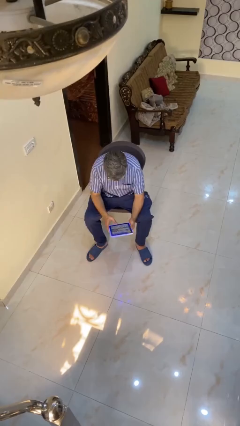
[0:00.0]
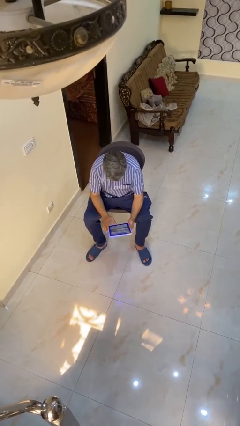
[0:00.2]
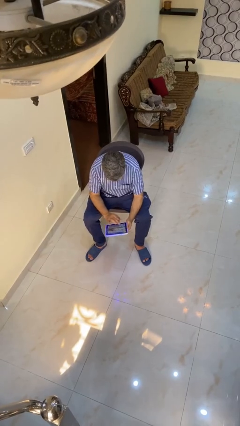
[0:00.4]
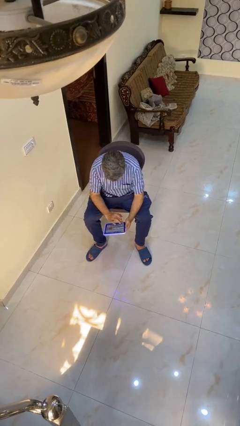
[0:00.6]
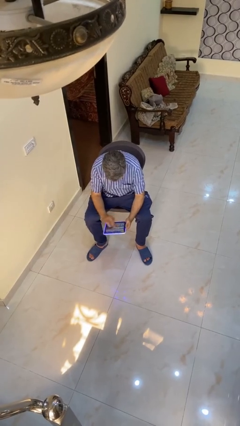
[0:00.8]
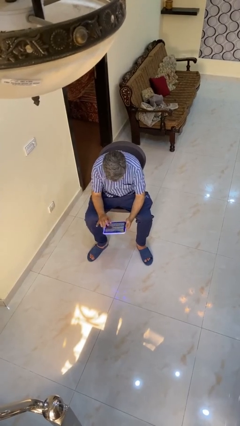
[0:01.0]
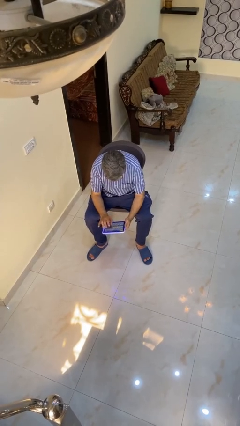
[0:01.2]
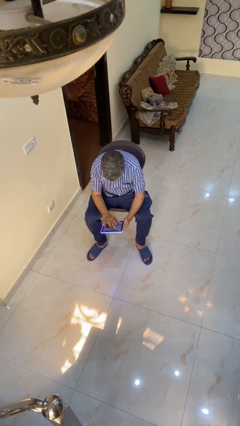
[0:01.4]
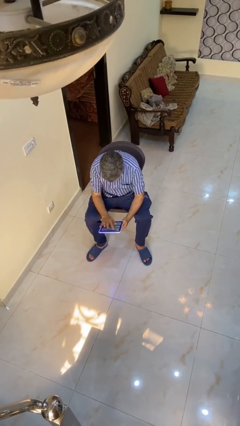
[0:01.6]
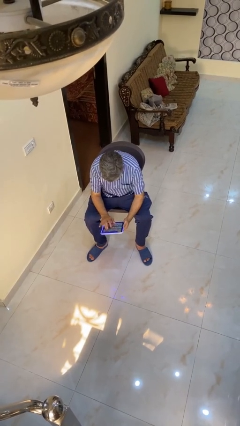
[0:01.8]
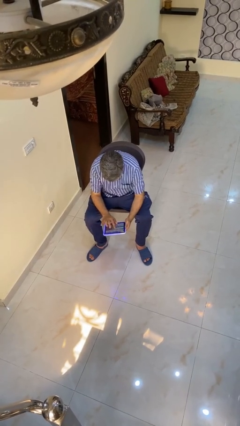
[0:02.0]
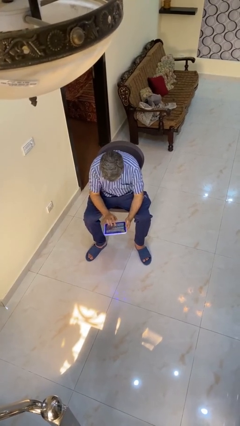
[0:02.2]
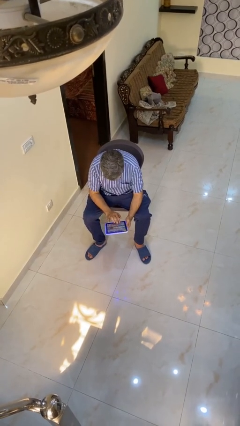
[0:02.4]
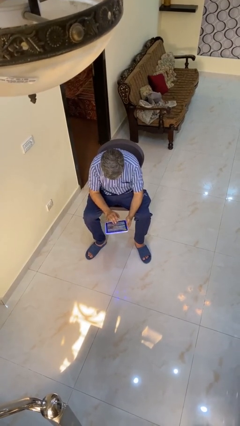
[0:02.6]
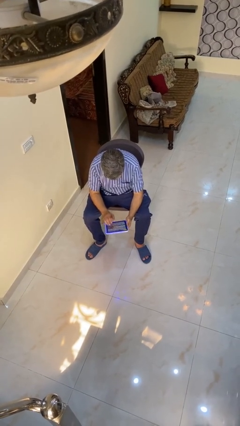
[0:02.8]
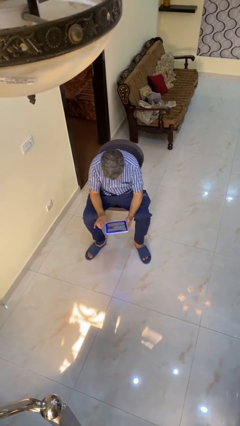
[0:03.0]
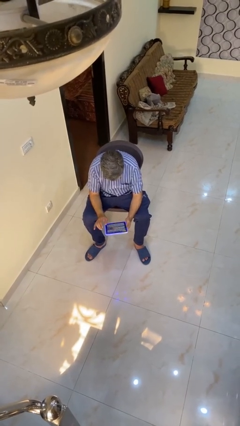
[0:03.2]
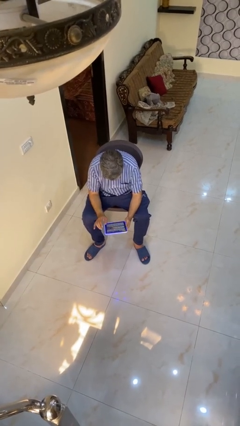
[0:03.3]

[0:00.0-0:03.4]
person interacts with tablet

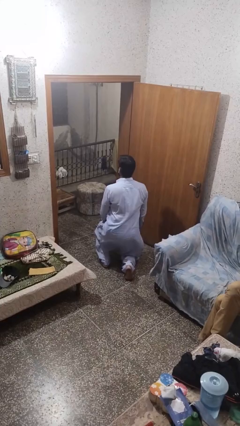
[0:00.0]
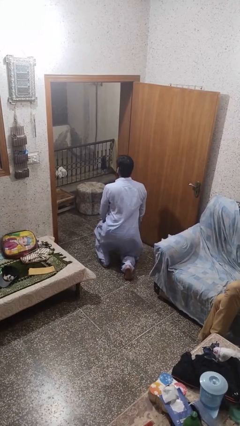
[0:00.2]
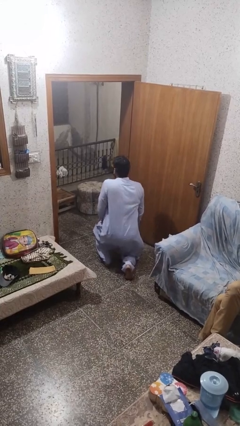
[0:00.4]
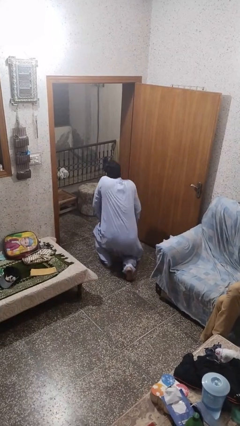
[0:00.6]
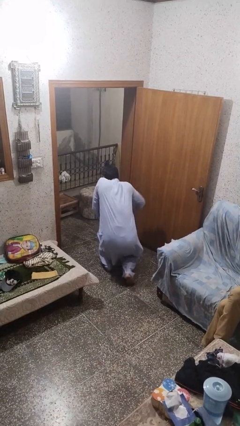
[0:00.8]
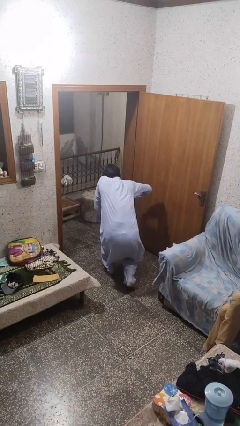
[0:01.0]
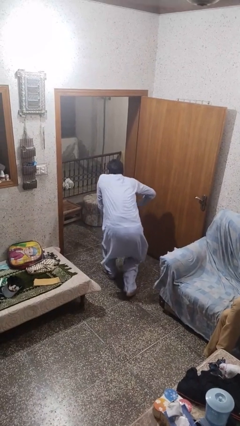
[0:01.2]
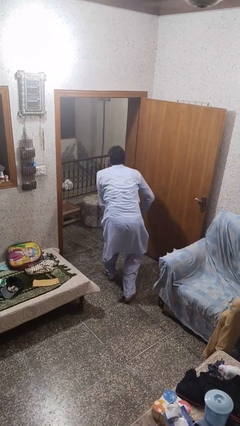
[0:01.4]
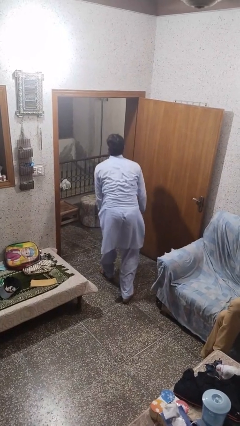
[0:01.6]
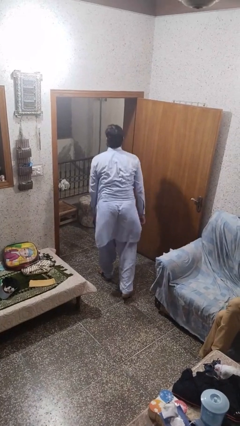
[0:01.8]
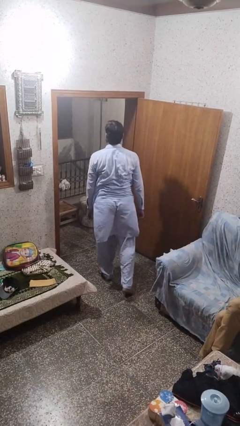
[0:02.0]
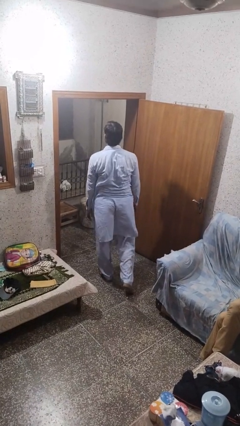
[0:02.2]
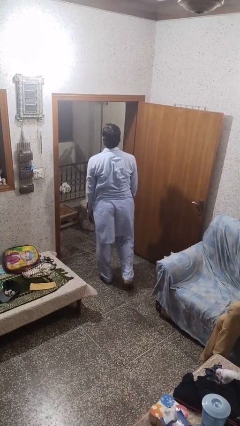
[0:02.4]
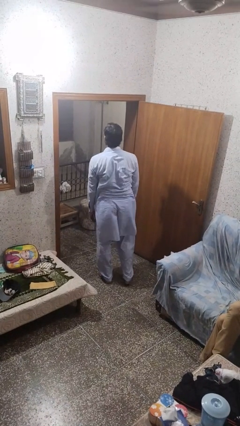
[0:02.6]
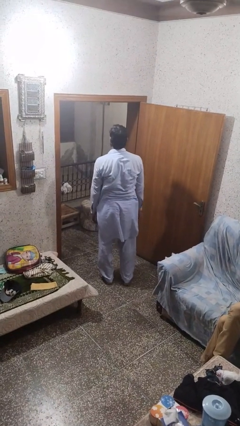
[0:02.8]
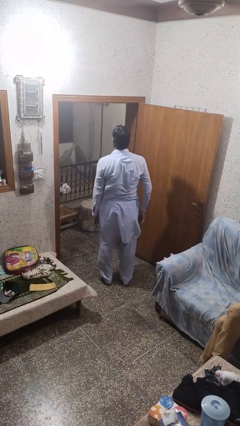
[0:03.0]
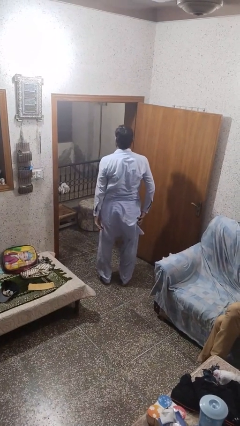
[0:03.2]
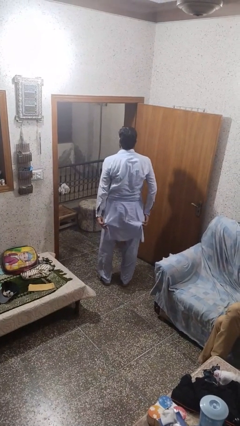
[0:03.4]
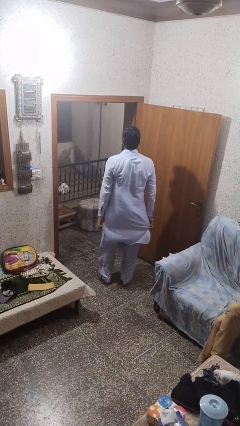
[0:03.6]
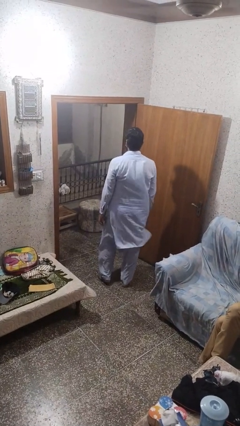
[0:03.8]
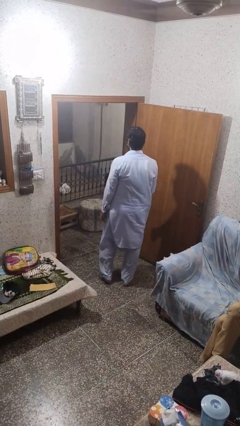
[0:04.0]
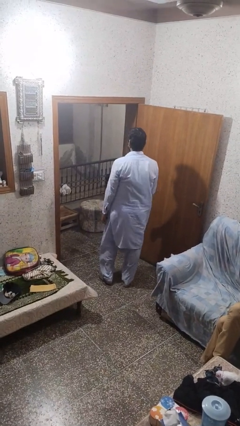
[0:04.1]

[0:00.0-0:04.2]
person stands up from floor

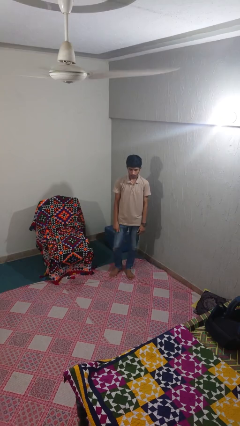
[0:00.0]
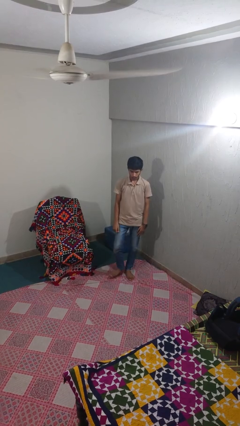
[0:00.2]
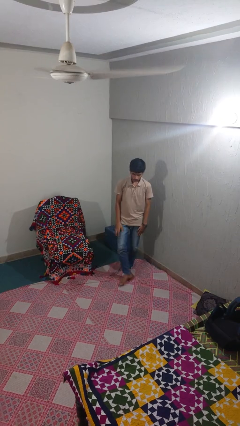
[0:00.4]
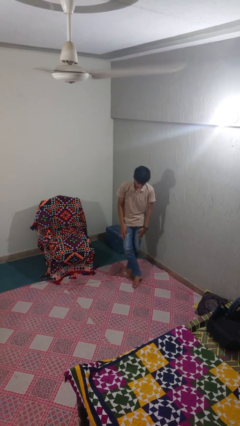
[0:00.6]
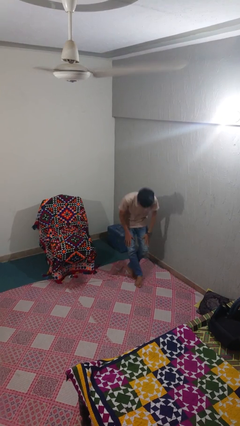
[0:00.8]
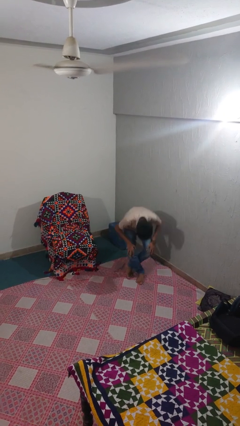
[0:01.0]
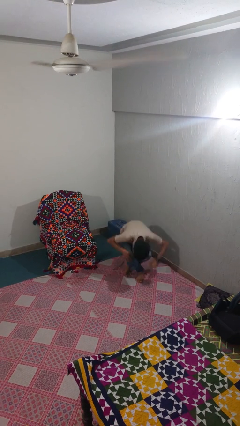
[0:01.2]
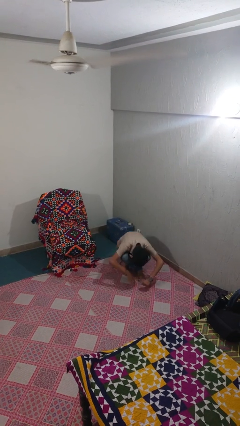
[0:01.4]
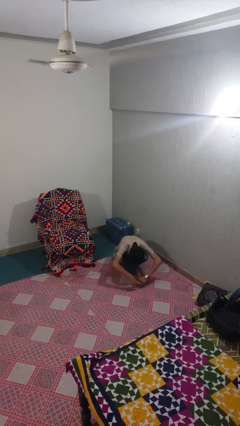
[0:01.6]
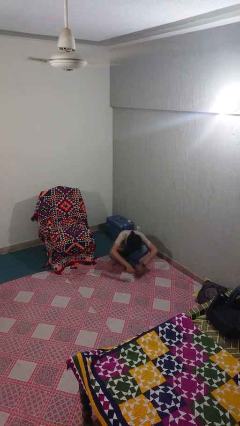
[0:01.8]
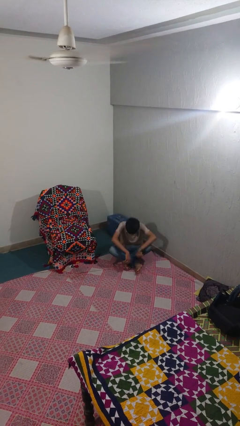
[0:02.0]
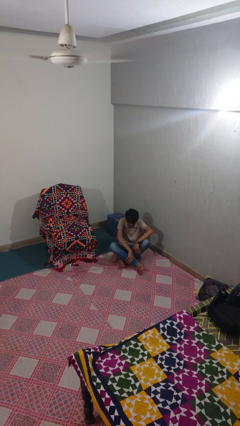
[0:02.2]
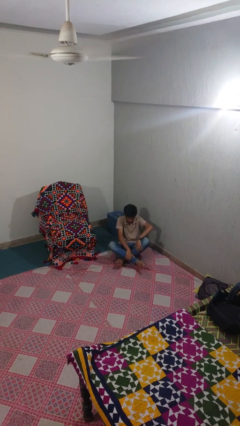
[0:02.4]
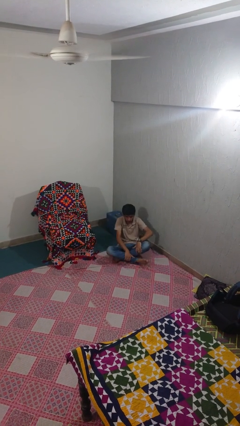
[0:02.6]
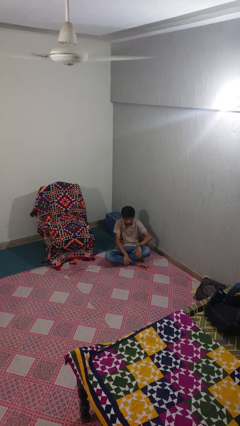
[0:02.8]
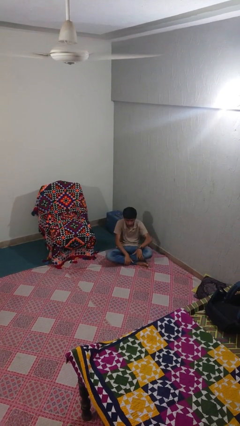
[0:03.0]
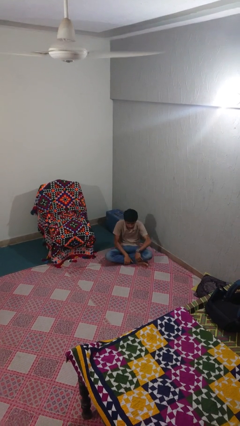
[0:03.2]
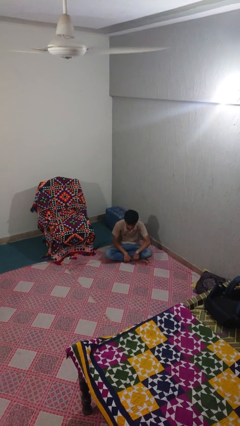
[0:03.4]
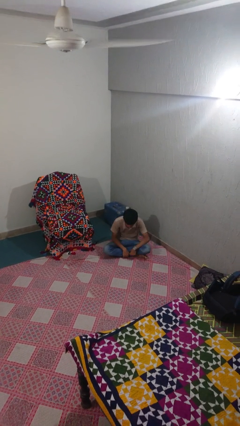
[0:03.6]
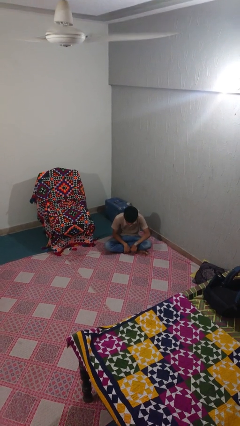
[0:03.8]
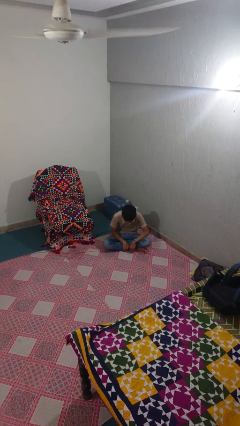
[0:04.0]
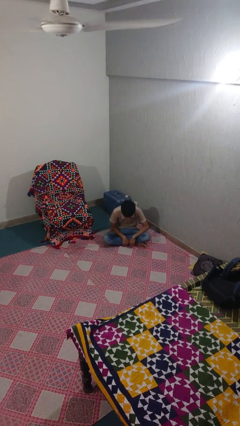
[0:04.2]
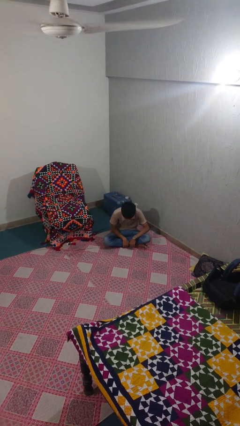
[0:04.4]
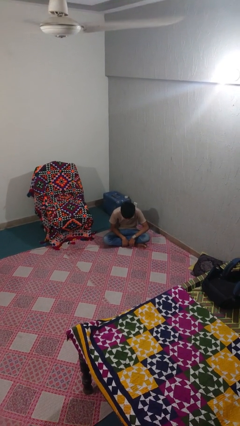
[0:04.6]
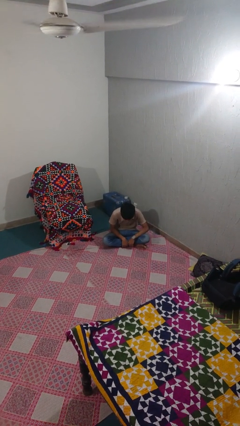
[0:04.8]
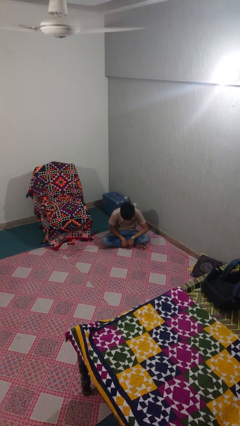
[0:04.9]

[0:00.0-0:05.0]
person sits crisscross

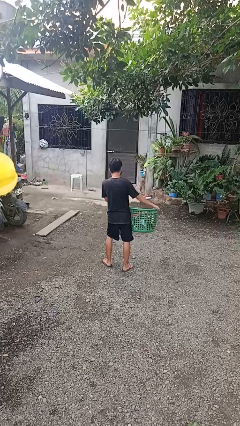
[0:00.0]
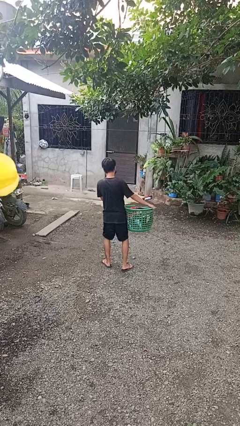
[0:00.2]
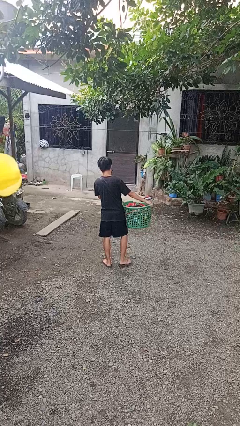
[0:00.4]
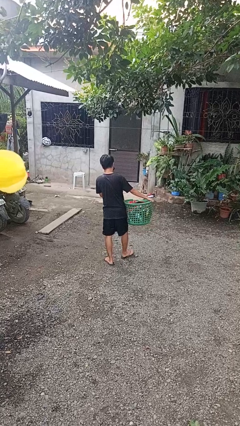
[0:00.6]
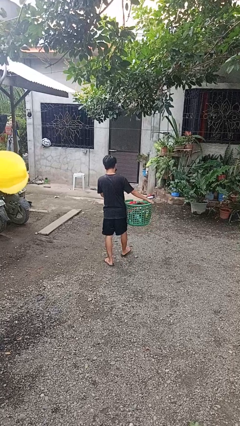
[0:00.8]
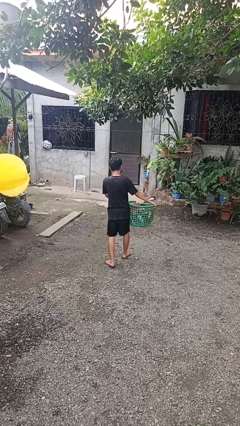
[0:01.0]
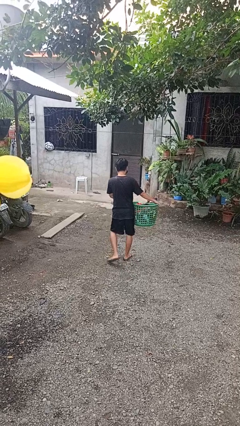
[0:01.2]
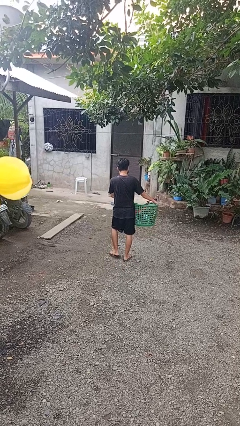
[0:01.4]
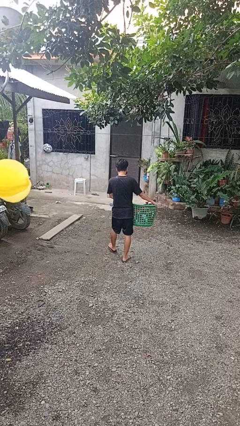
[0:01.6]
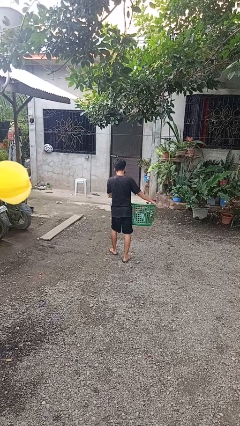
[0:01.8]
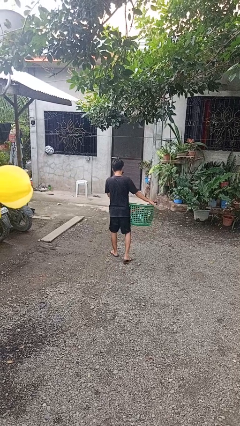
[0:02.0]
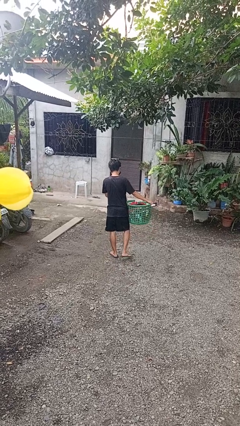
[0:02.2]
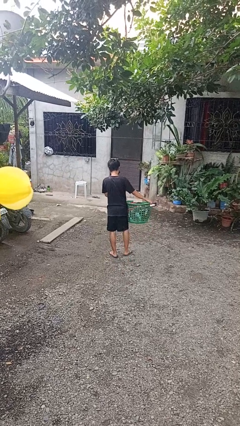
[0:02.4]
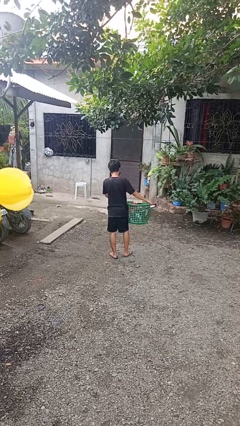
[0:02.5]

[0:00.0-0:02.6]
person carries laundry basket

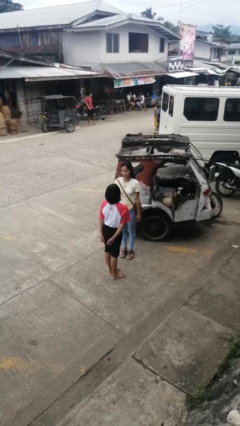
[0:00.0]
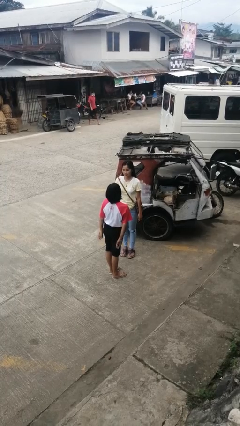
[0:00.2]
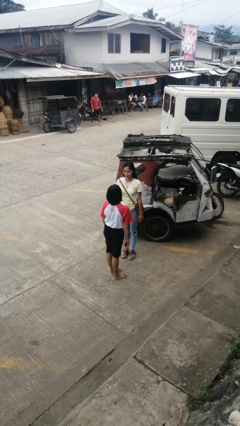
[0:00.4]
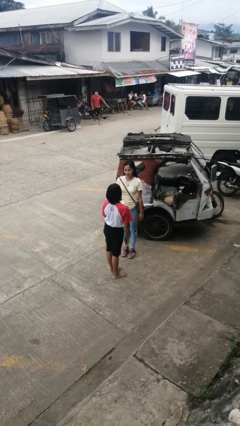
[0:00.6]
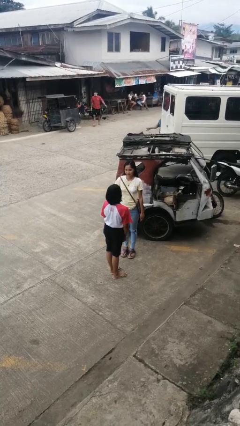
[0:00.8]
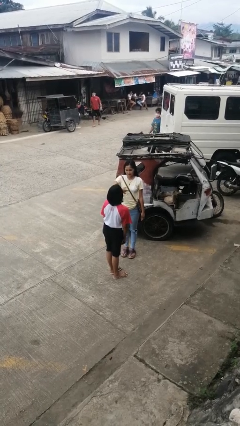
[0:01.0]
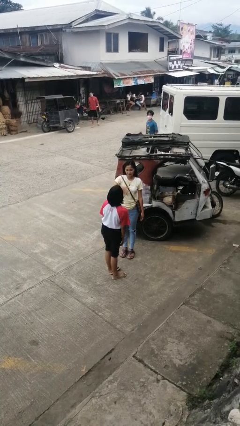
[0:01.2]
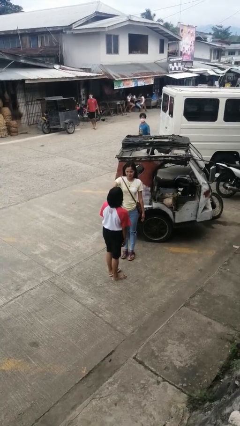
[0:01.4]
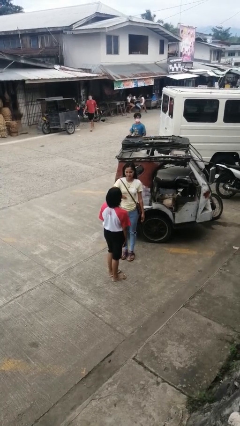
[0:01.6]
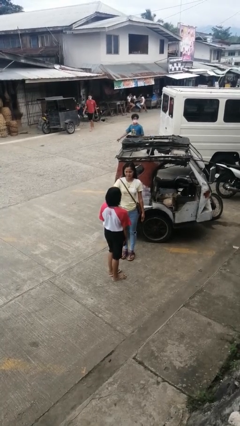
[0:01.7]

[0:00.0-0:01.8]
person shoves person

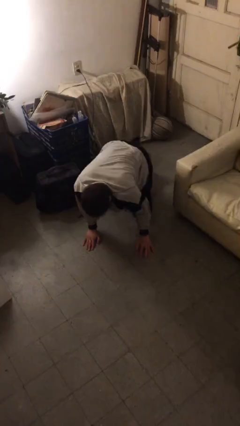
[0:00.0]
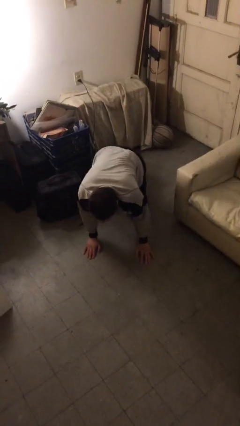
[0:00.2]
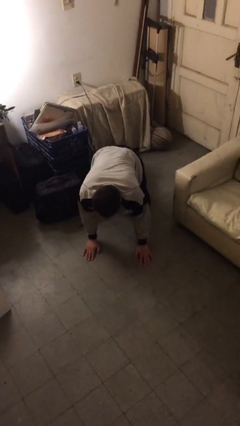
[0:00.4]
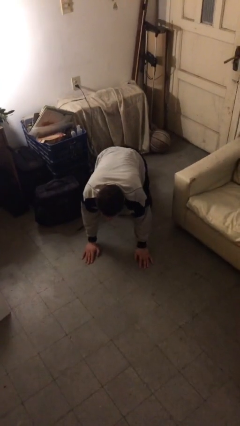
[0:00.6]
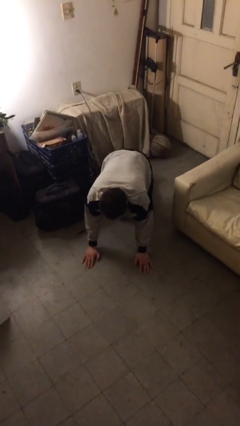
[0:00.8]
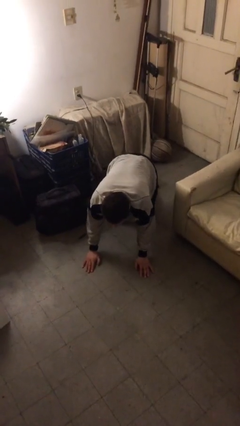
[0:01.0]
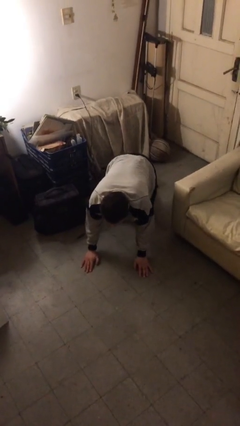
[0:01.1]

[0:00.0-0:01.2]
person crawls
